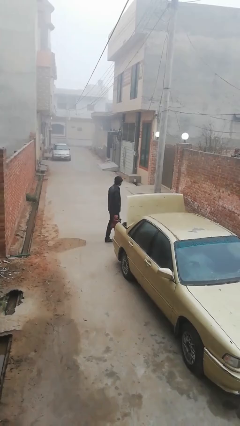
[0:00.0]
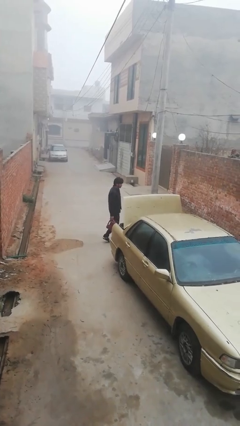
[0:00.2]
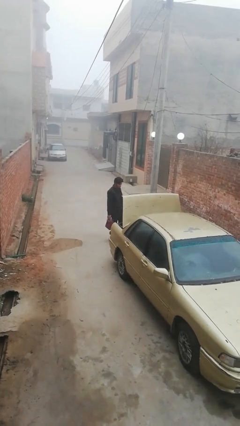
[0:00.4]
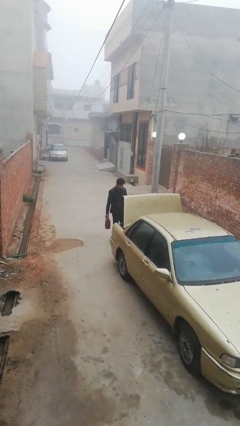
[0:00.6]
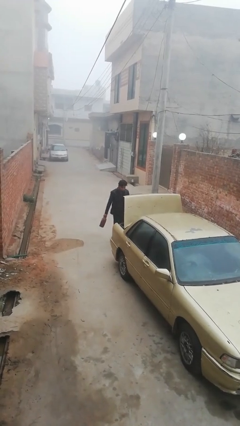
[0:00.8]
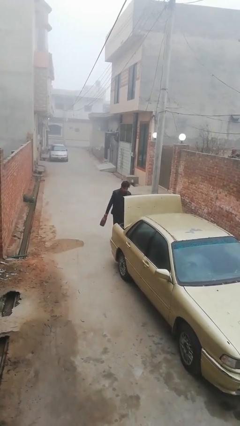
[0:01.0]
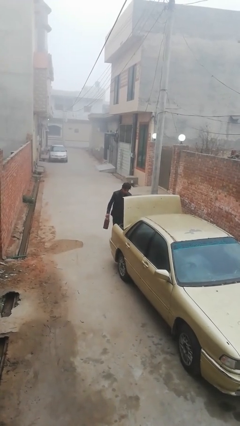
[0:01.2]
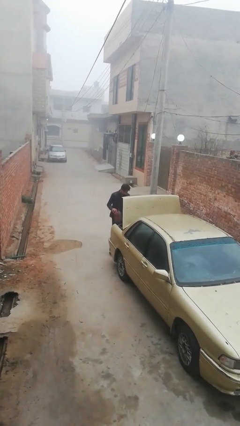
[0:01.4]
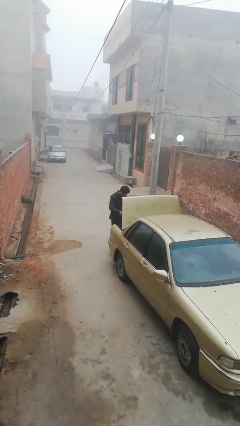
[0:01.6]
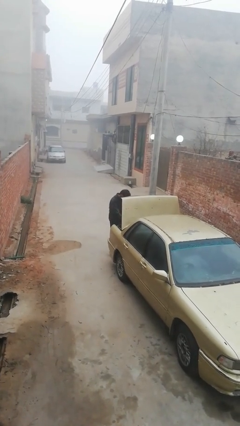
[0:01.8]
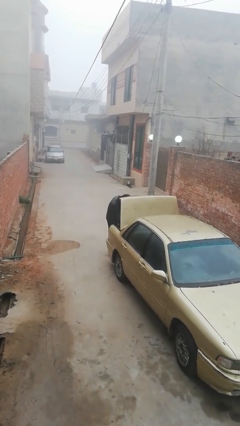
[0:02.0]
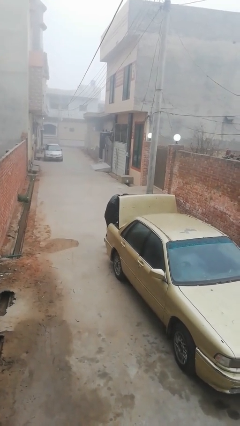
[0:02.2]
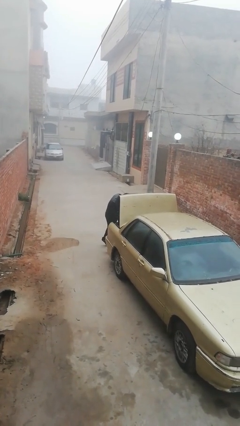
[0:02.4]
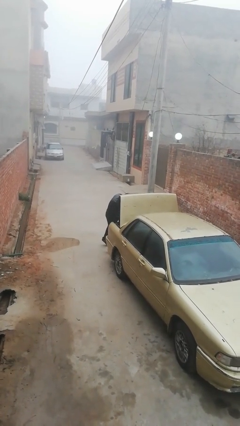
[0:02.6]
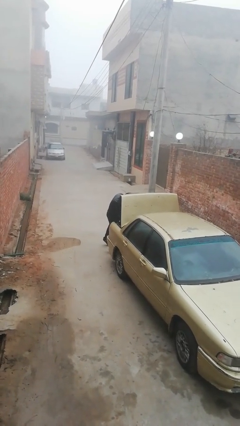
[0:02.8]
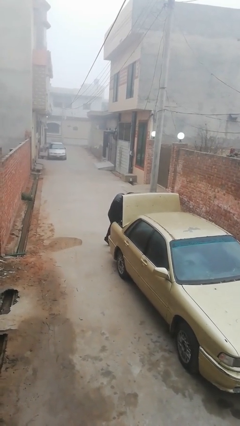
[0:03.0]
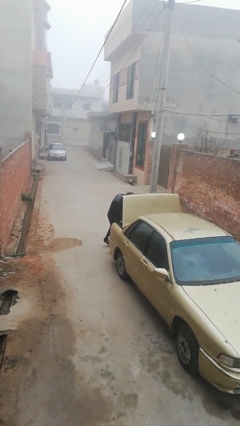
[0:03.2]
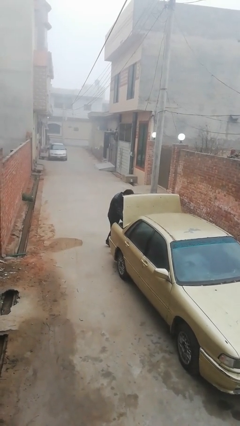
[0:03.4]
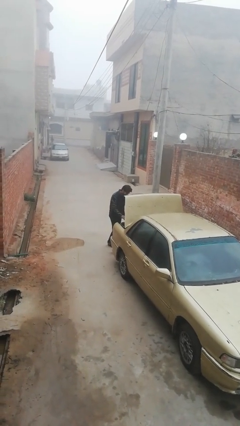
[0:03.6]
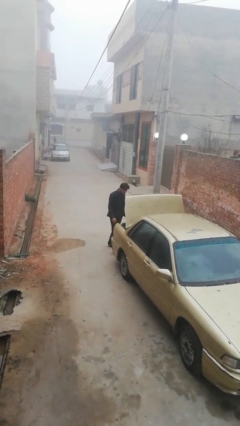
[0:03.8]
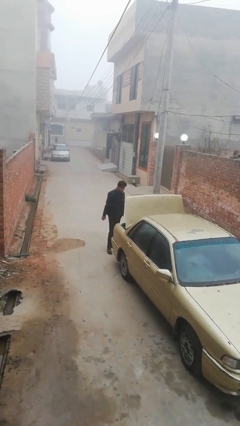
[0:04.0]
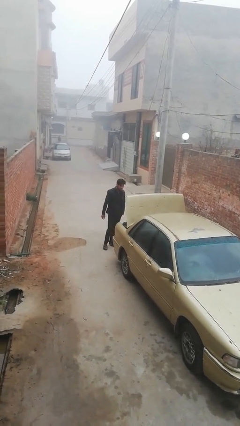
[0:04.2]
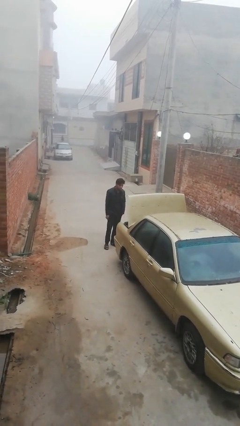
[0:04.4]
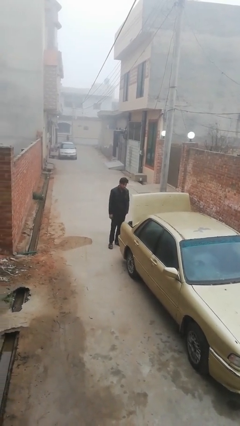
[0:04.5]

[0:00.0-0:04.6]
person loads car

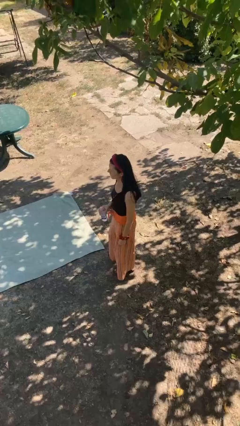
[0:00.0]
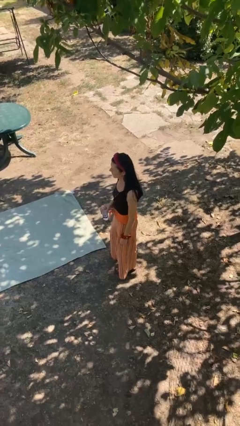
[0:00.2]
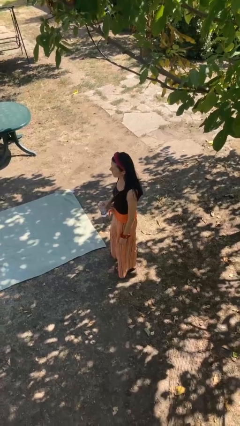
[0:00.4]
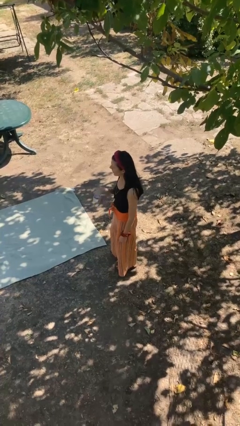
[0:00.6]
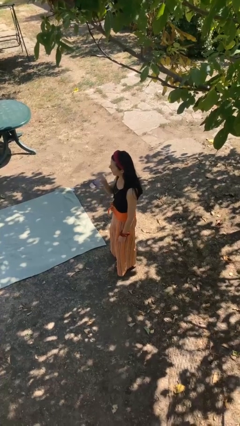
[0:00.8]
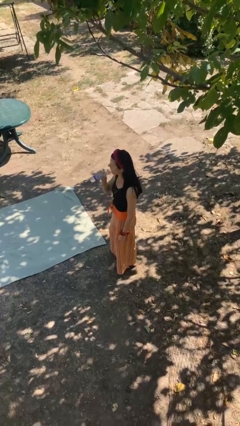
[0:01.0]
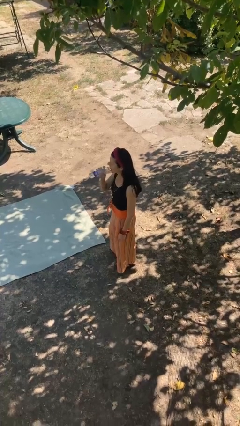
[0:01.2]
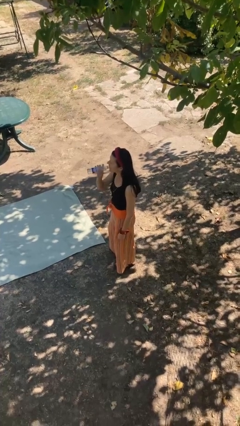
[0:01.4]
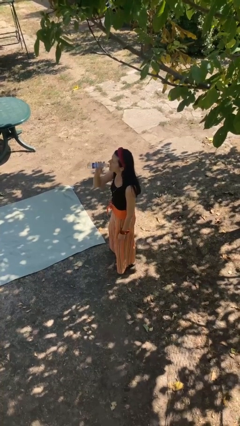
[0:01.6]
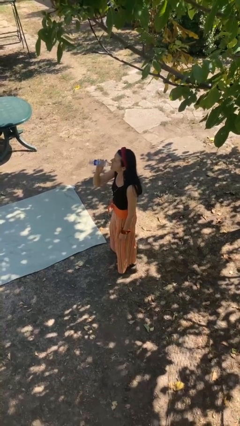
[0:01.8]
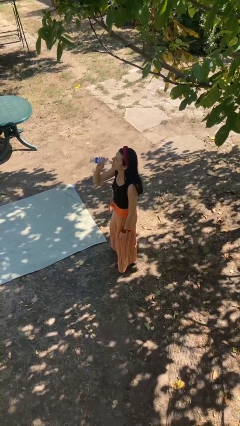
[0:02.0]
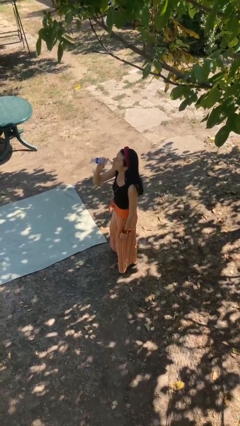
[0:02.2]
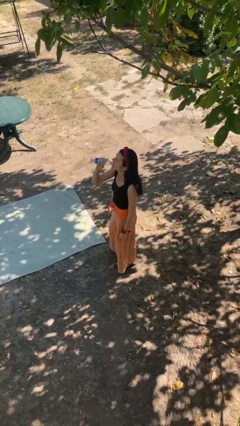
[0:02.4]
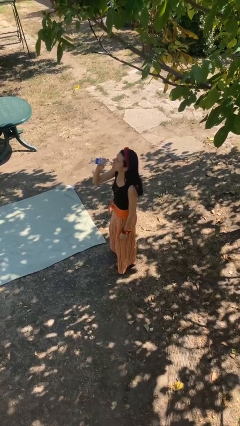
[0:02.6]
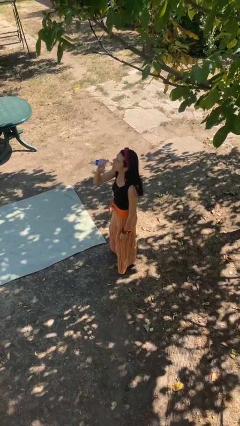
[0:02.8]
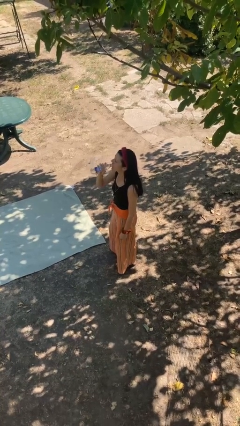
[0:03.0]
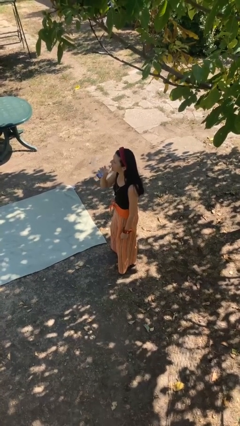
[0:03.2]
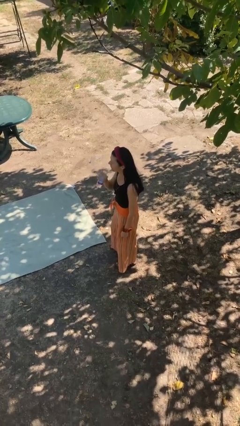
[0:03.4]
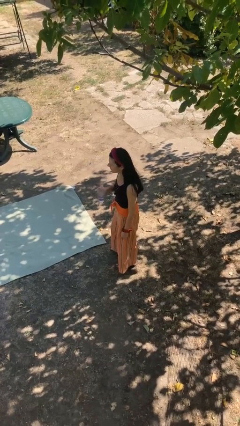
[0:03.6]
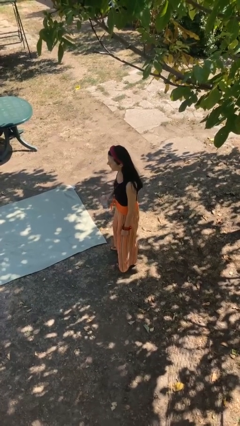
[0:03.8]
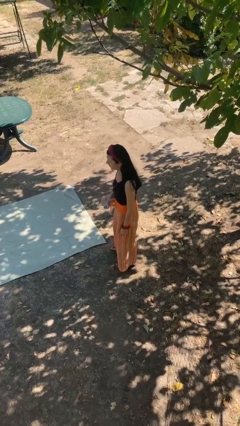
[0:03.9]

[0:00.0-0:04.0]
person drinks from bottle

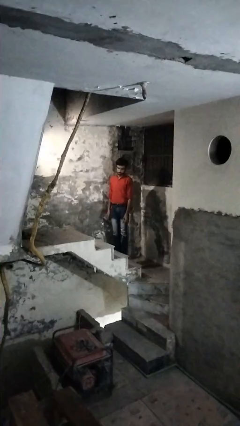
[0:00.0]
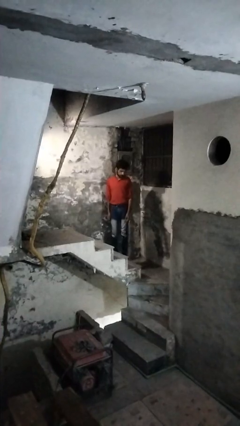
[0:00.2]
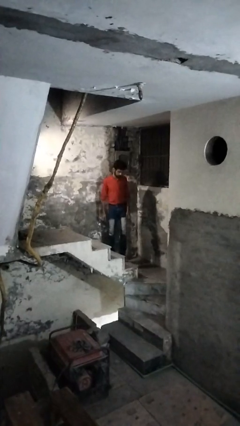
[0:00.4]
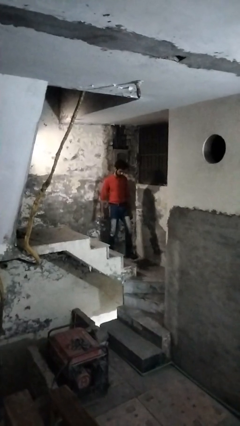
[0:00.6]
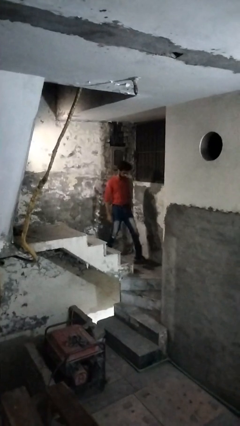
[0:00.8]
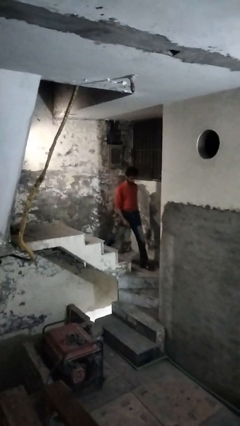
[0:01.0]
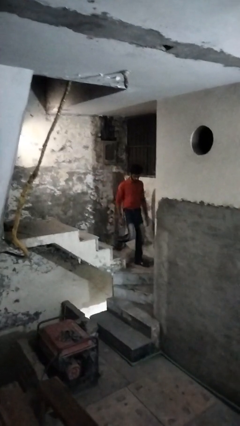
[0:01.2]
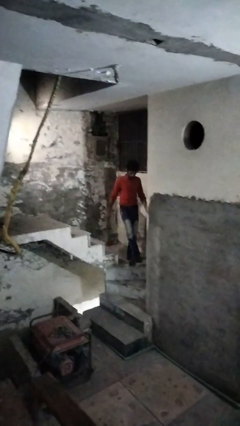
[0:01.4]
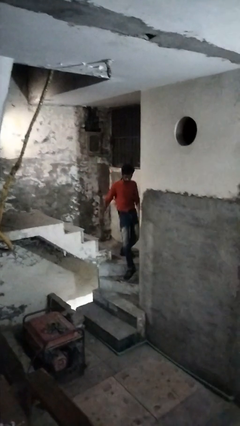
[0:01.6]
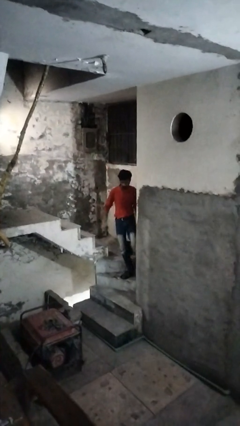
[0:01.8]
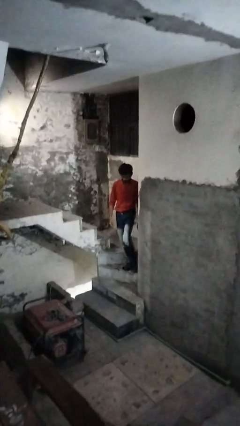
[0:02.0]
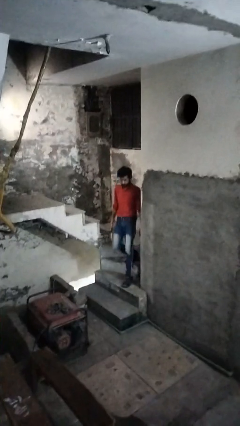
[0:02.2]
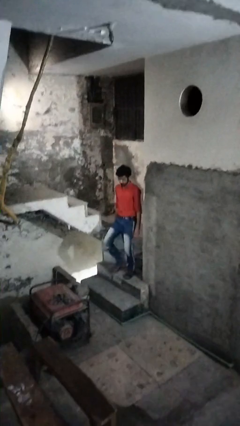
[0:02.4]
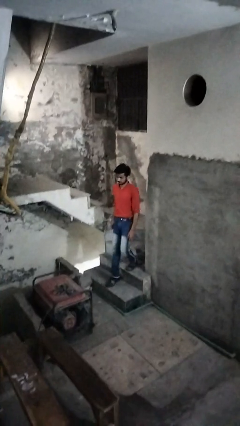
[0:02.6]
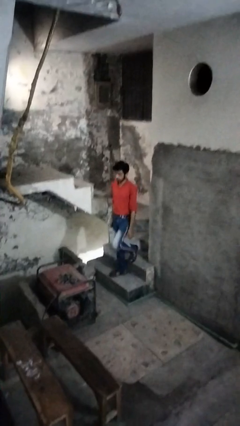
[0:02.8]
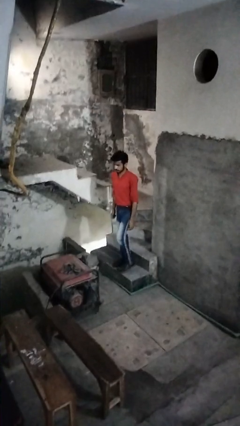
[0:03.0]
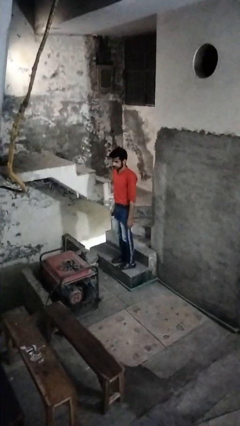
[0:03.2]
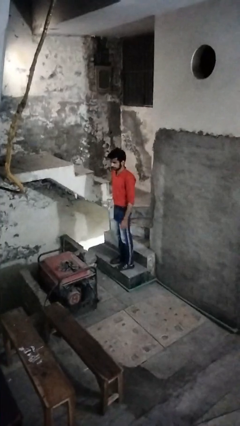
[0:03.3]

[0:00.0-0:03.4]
person climbs down stairs

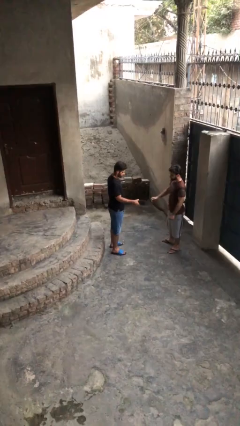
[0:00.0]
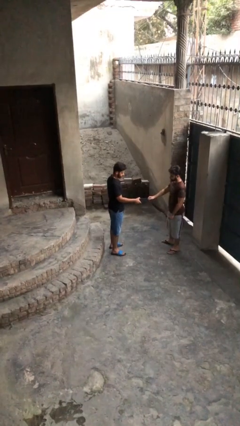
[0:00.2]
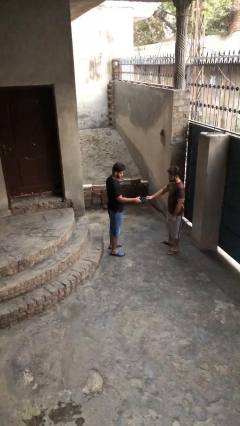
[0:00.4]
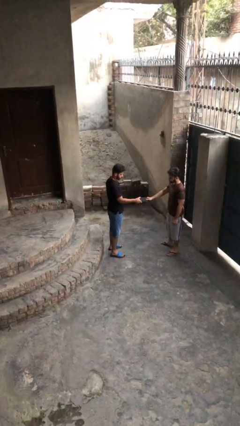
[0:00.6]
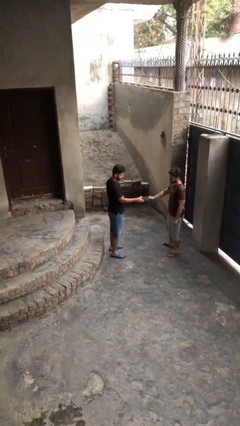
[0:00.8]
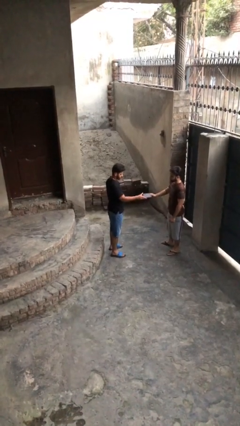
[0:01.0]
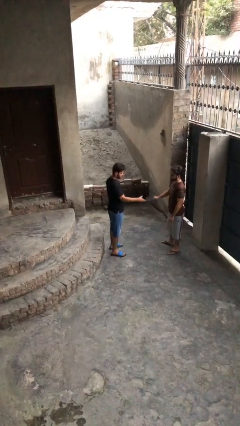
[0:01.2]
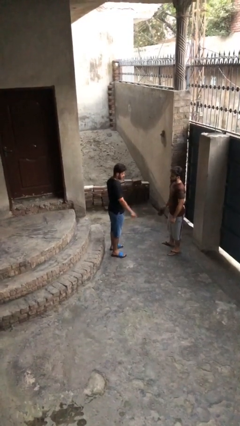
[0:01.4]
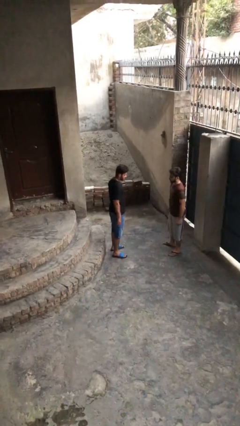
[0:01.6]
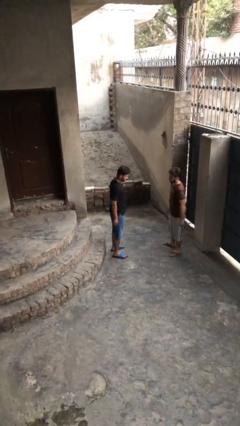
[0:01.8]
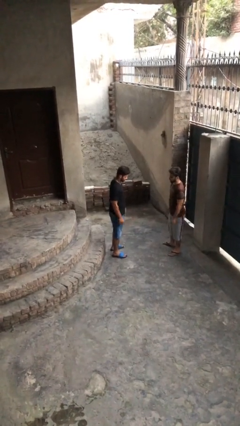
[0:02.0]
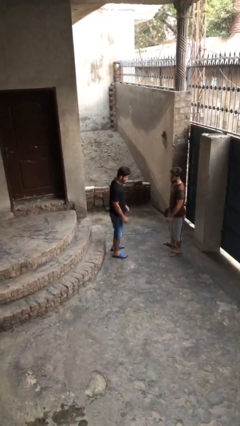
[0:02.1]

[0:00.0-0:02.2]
person transfers object to person

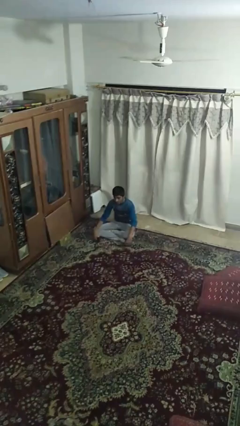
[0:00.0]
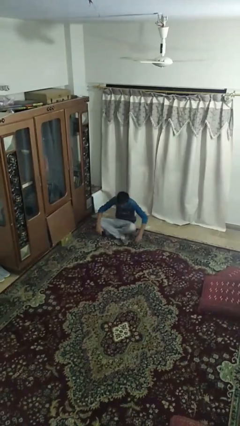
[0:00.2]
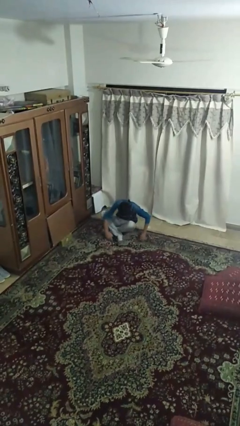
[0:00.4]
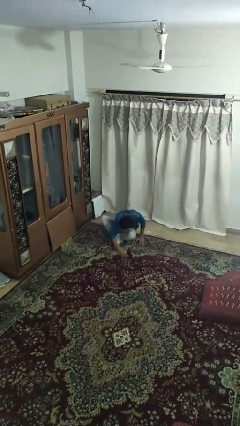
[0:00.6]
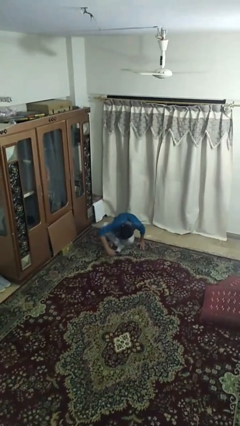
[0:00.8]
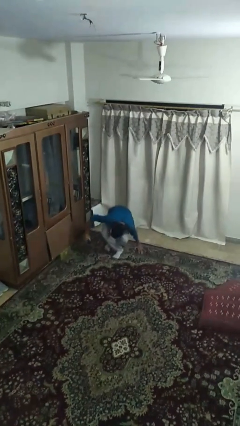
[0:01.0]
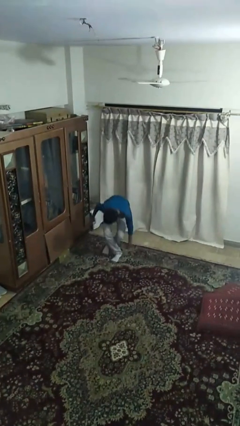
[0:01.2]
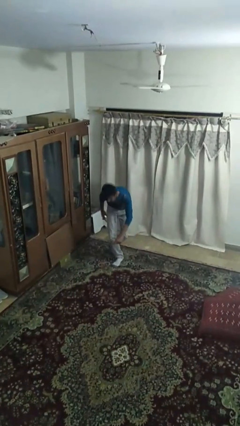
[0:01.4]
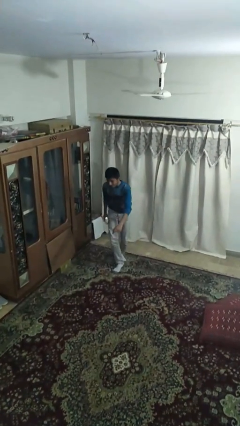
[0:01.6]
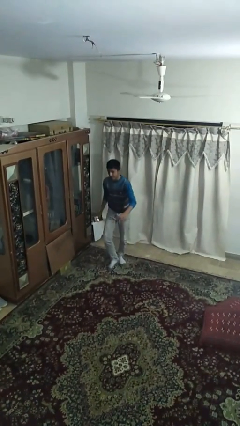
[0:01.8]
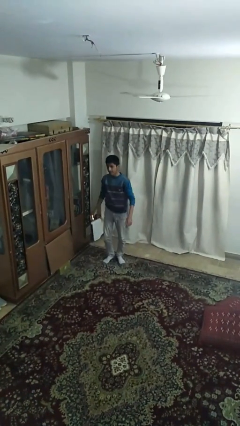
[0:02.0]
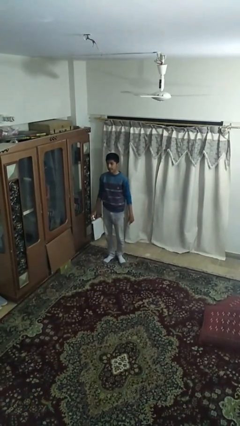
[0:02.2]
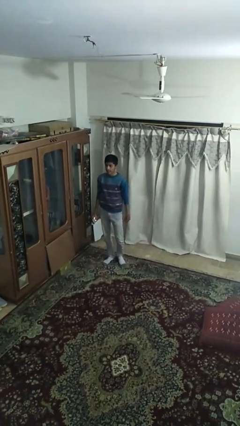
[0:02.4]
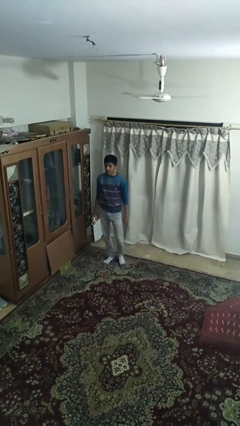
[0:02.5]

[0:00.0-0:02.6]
person stands up

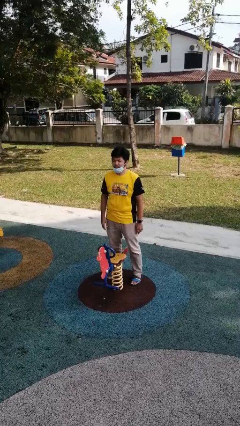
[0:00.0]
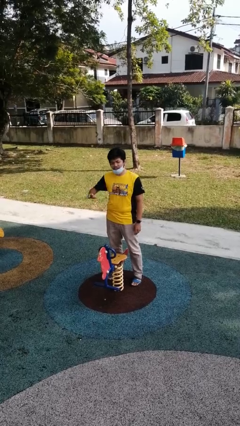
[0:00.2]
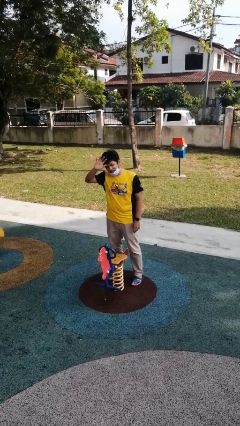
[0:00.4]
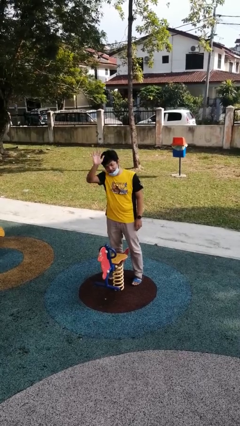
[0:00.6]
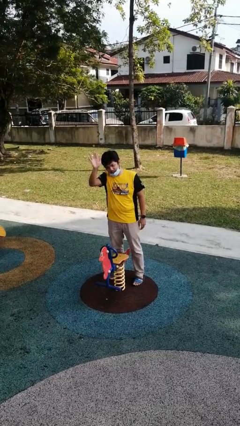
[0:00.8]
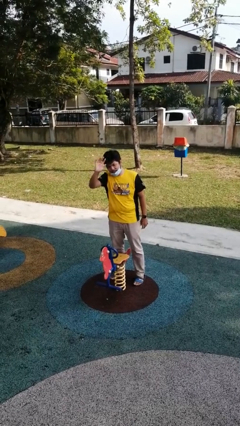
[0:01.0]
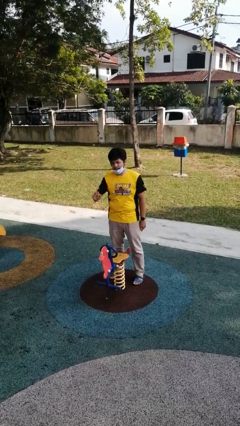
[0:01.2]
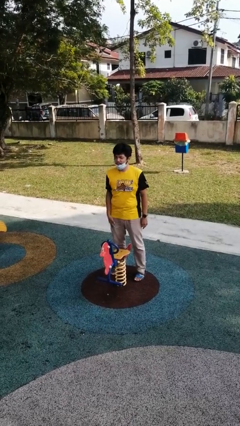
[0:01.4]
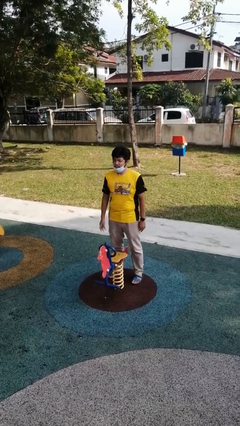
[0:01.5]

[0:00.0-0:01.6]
person waves at person
